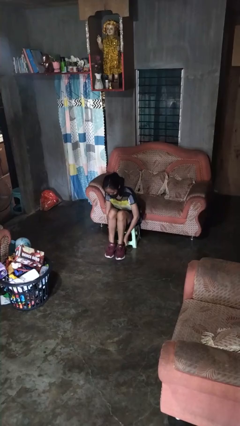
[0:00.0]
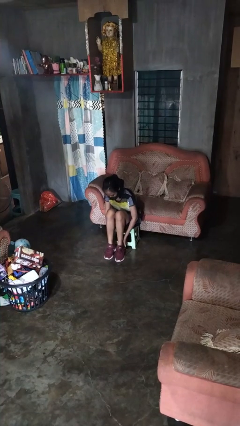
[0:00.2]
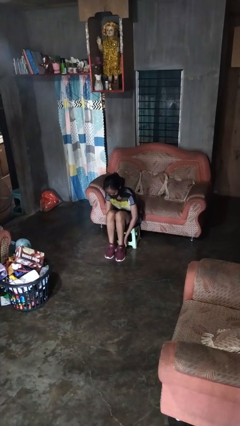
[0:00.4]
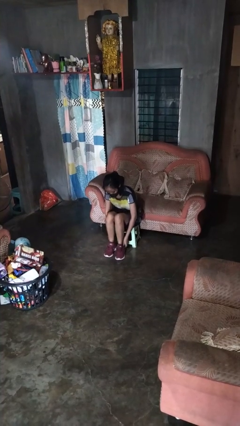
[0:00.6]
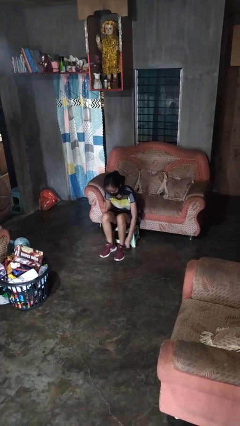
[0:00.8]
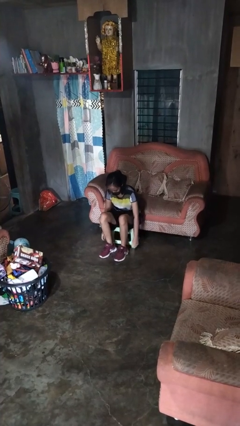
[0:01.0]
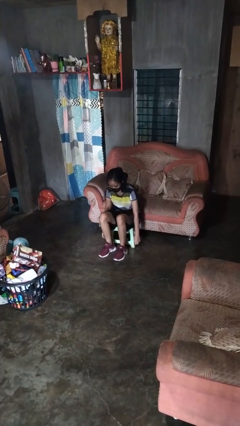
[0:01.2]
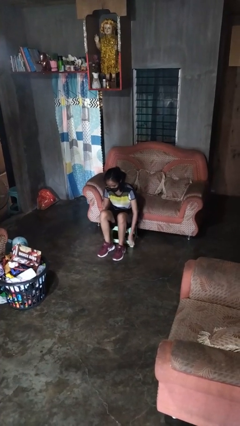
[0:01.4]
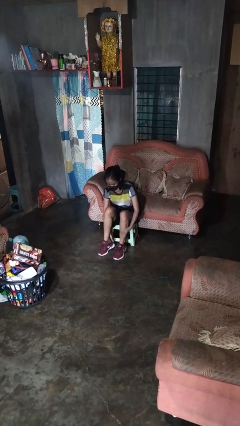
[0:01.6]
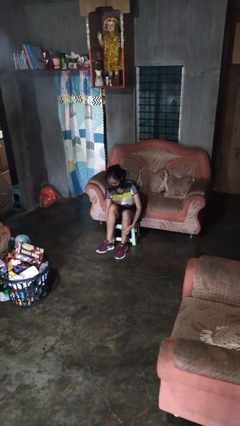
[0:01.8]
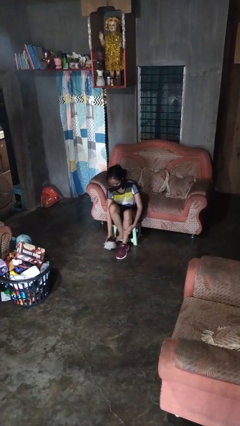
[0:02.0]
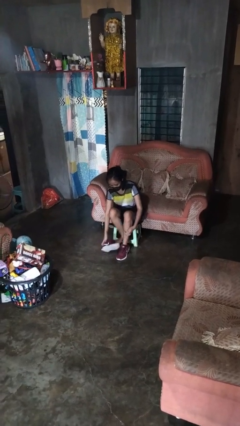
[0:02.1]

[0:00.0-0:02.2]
person takes off shoes

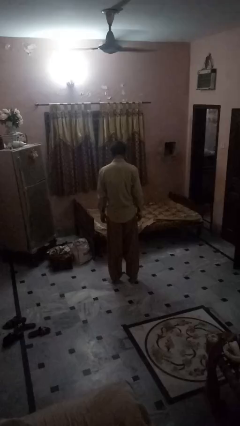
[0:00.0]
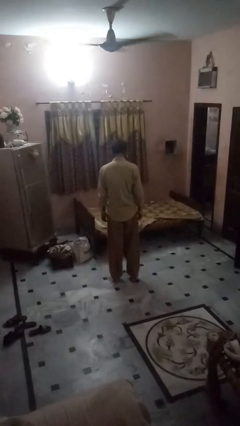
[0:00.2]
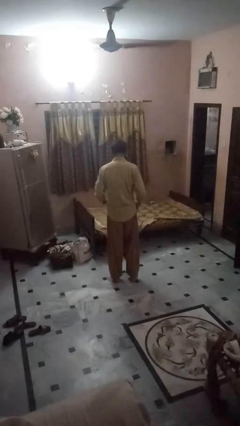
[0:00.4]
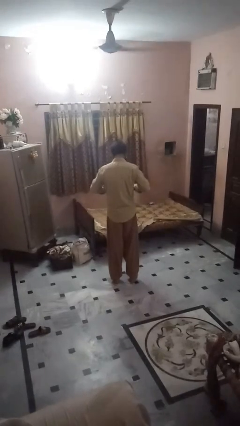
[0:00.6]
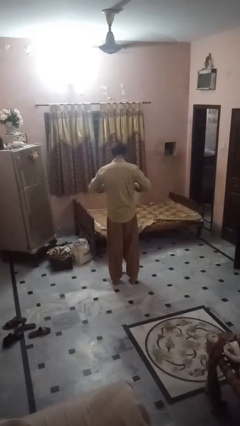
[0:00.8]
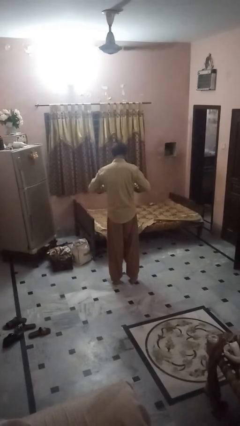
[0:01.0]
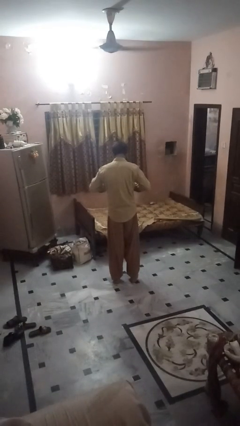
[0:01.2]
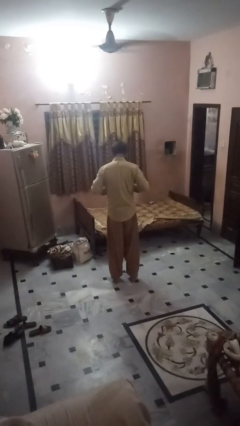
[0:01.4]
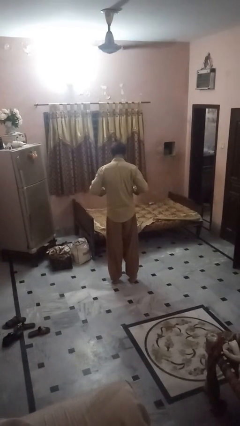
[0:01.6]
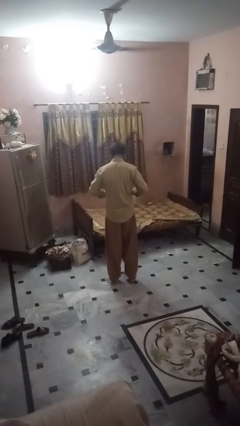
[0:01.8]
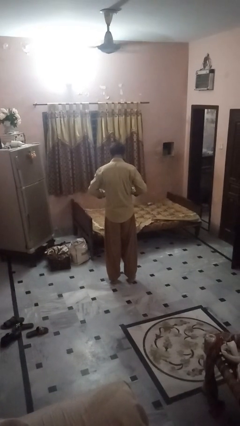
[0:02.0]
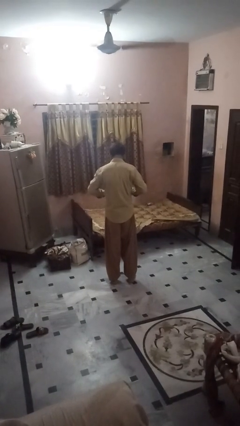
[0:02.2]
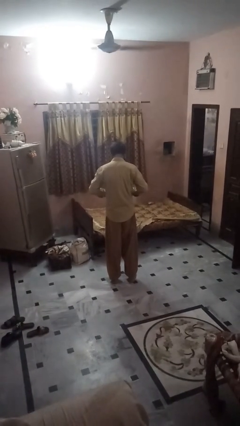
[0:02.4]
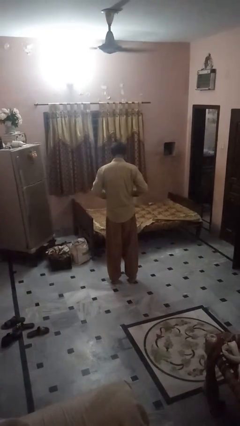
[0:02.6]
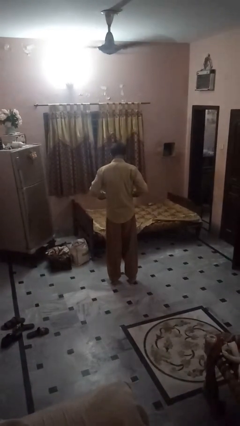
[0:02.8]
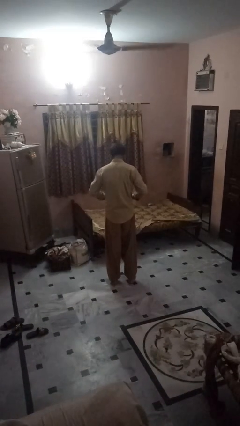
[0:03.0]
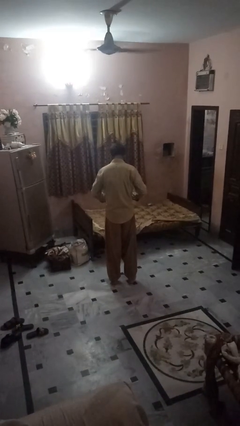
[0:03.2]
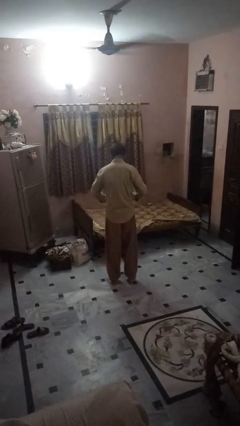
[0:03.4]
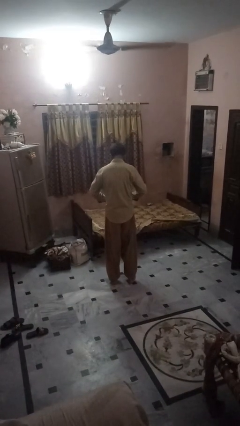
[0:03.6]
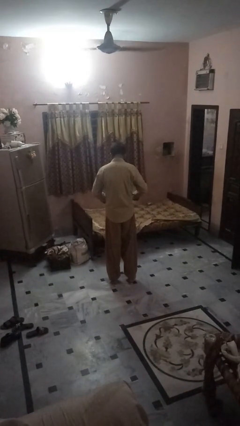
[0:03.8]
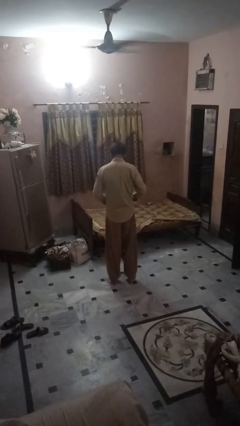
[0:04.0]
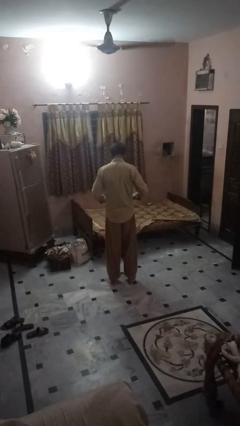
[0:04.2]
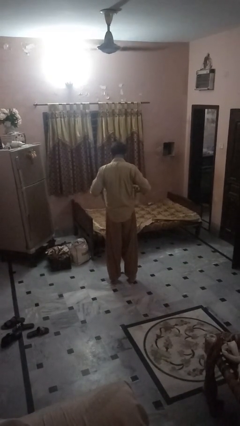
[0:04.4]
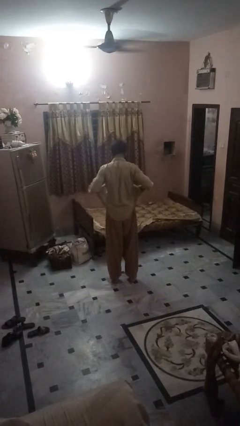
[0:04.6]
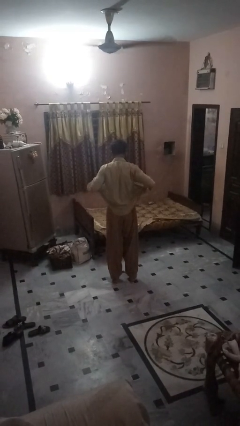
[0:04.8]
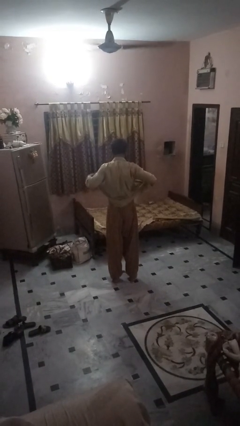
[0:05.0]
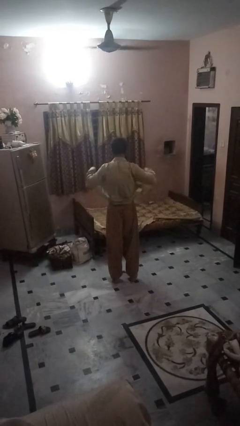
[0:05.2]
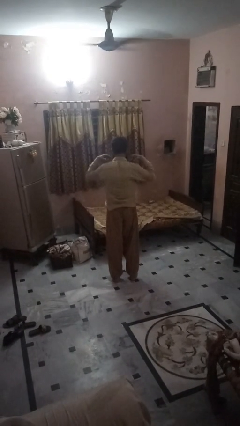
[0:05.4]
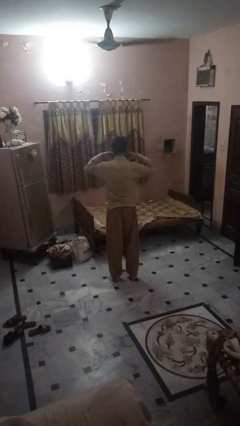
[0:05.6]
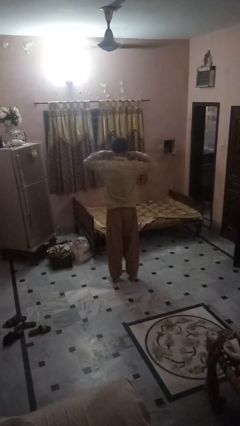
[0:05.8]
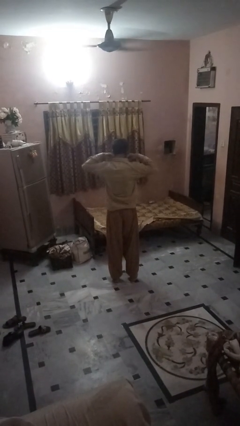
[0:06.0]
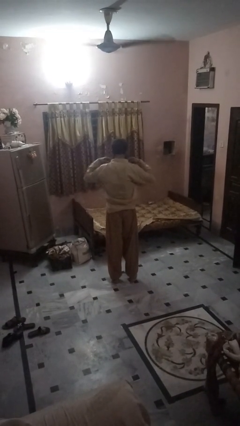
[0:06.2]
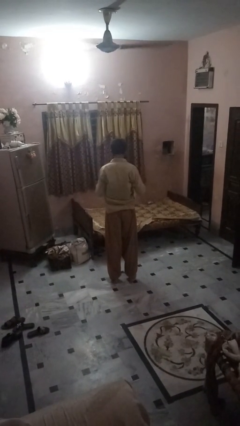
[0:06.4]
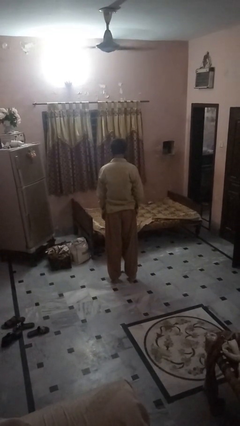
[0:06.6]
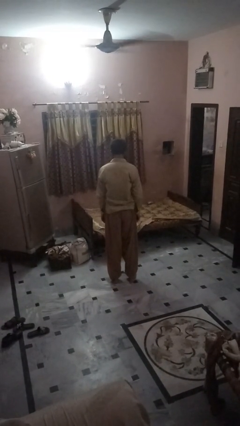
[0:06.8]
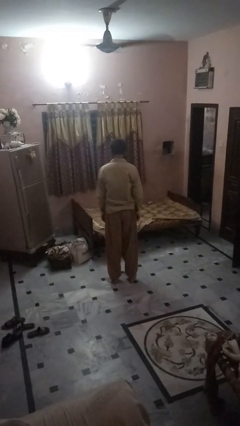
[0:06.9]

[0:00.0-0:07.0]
person unbuttons shirt

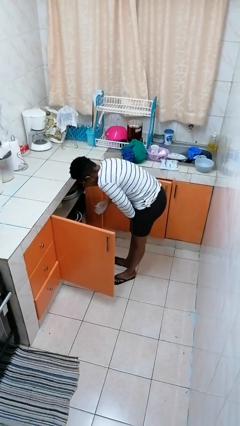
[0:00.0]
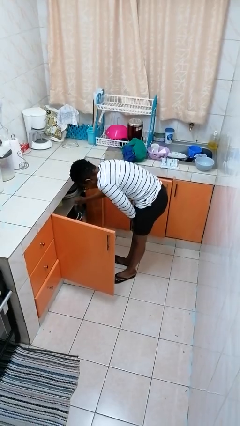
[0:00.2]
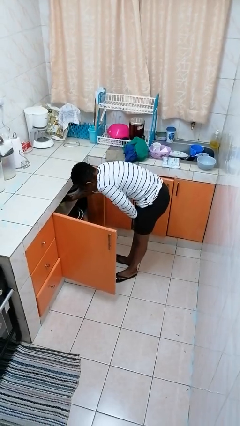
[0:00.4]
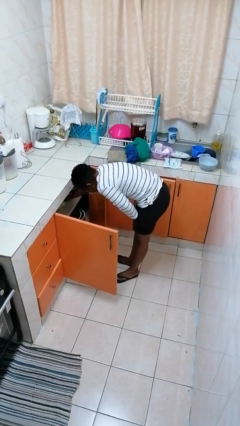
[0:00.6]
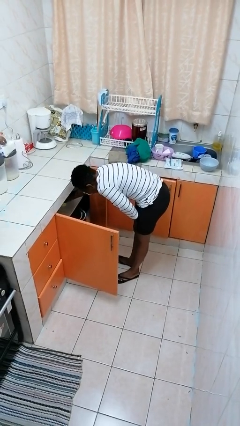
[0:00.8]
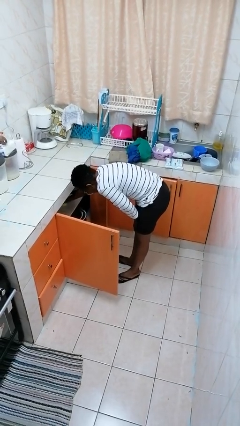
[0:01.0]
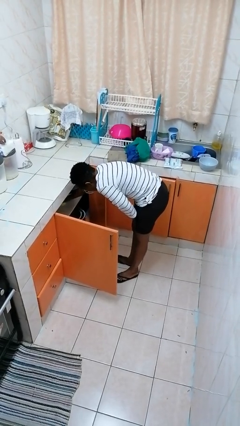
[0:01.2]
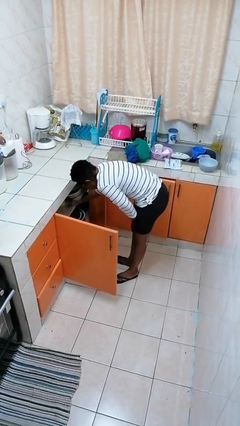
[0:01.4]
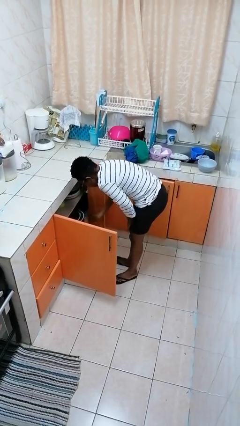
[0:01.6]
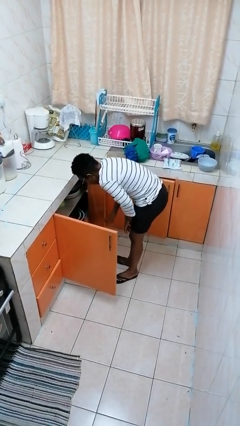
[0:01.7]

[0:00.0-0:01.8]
person puts object in cabinet

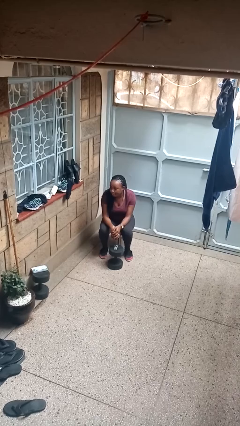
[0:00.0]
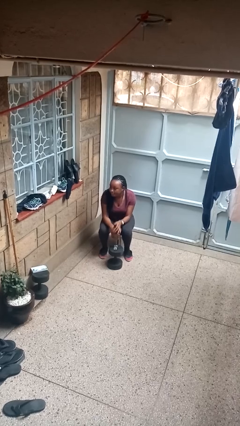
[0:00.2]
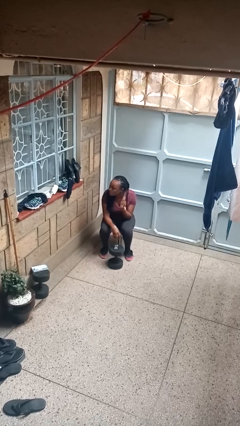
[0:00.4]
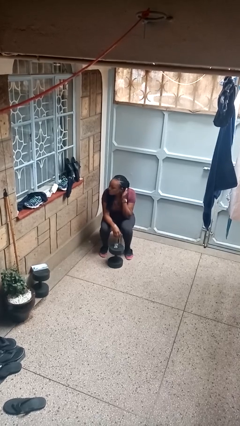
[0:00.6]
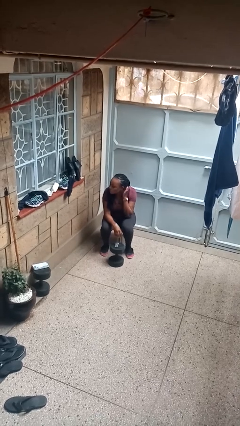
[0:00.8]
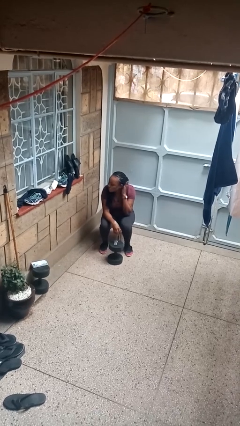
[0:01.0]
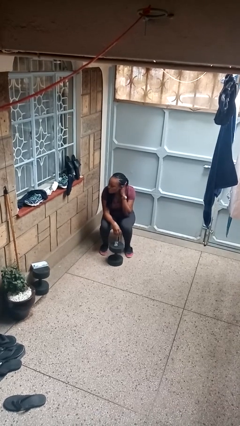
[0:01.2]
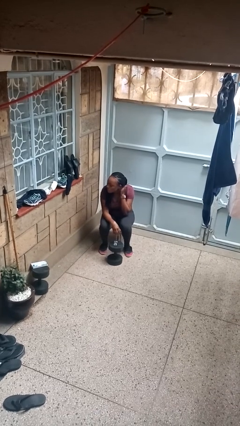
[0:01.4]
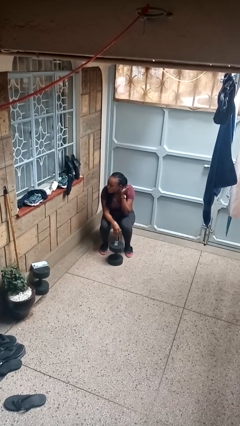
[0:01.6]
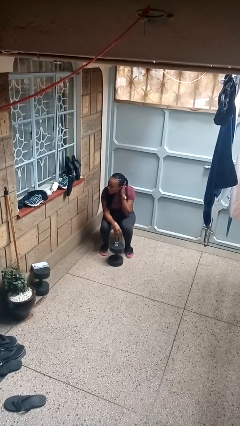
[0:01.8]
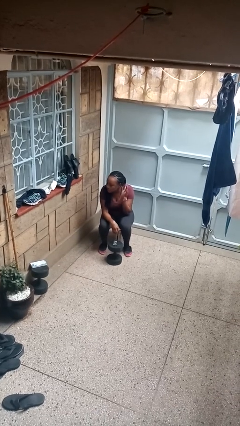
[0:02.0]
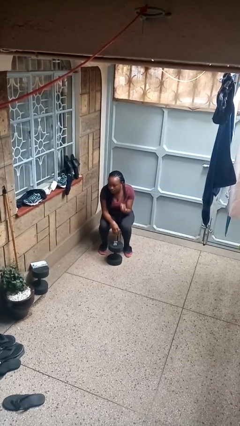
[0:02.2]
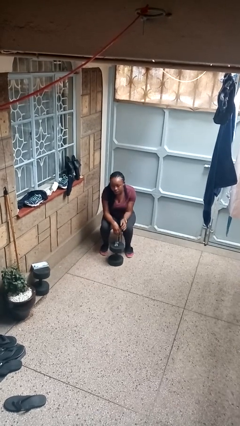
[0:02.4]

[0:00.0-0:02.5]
person pats head

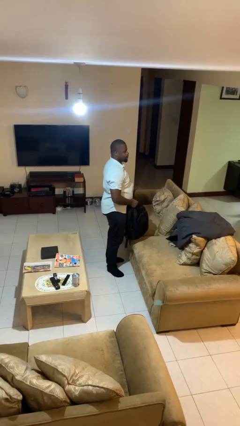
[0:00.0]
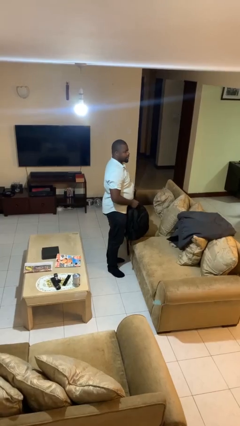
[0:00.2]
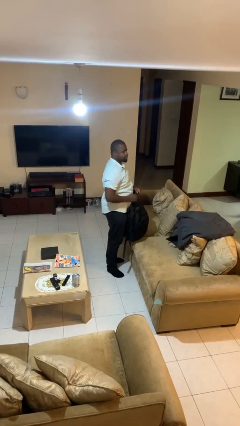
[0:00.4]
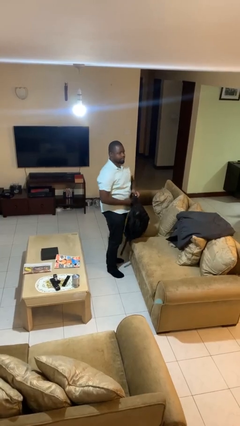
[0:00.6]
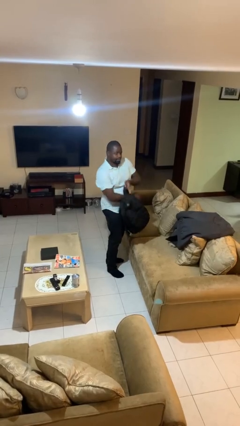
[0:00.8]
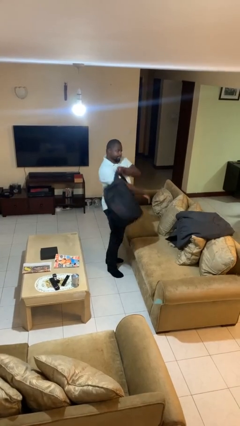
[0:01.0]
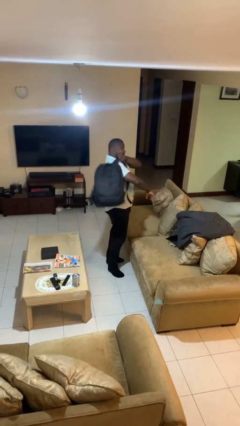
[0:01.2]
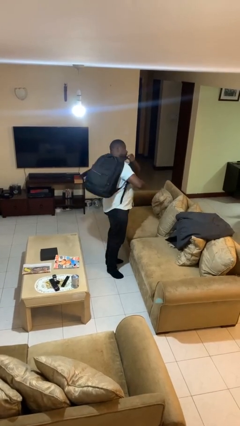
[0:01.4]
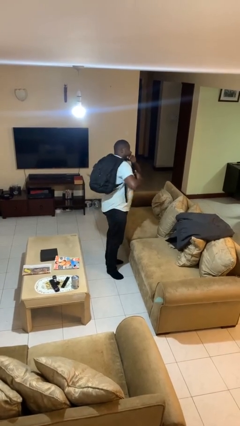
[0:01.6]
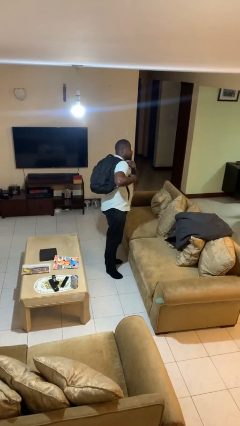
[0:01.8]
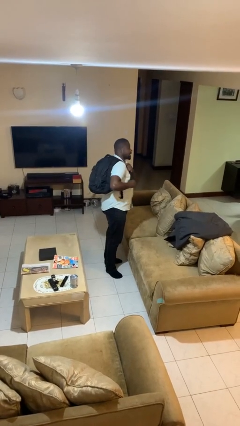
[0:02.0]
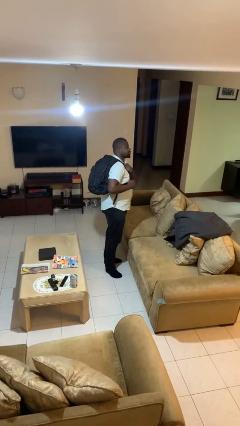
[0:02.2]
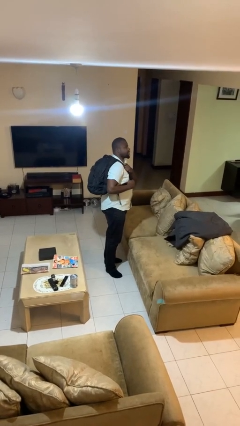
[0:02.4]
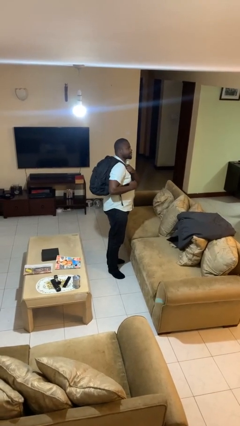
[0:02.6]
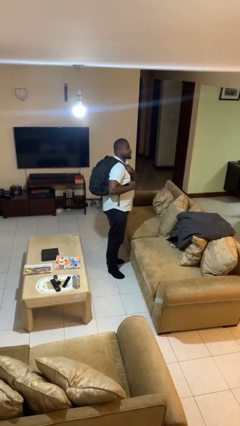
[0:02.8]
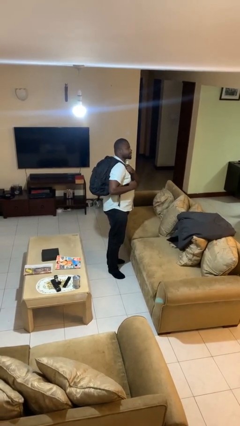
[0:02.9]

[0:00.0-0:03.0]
person puts on backpack

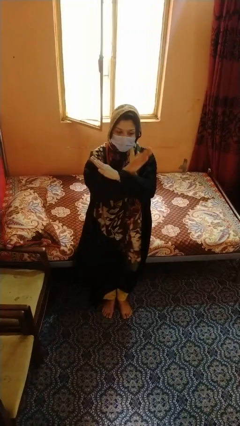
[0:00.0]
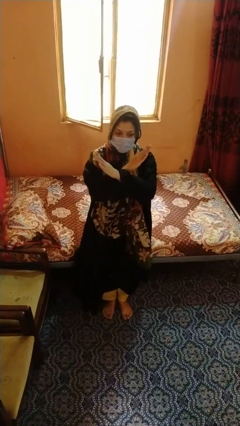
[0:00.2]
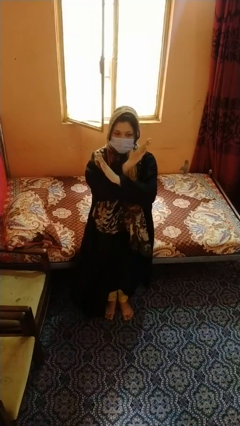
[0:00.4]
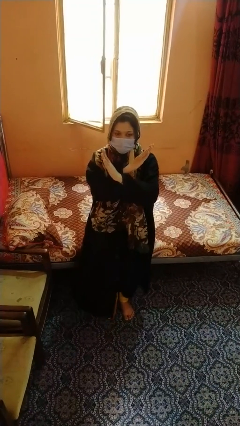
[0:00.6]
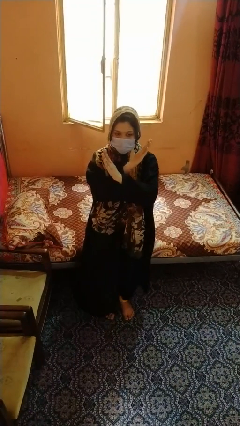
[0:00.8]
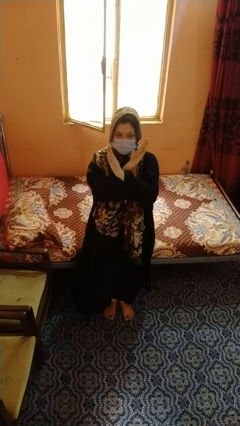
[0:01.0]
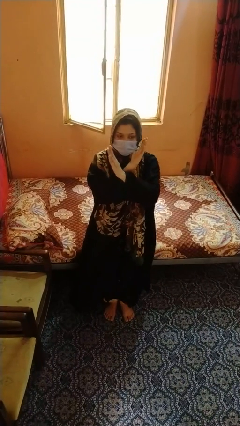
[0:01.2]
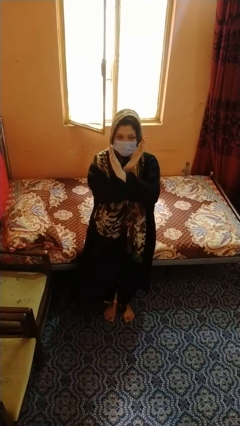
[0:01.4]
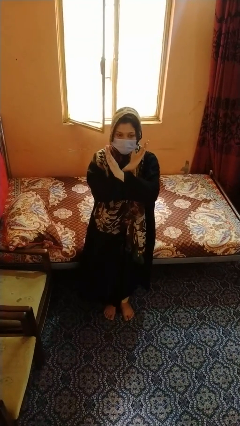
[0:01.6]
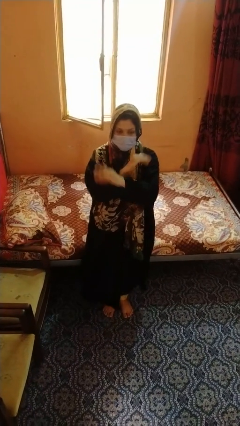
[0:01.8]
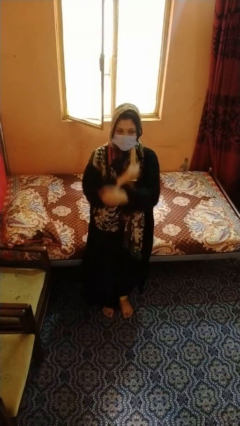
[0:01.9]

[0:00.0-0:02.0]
person gestures arms x
